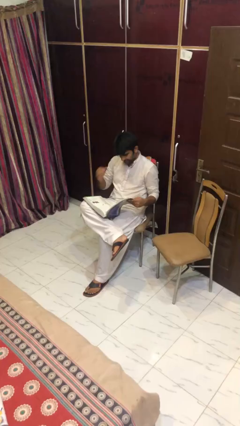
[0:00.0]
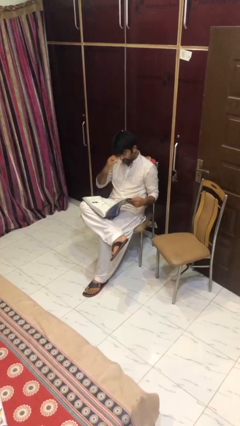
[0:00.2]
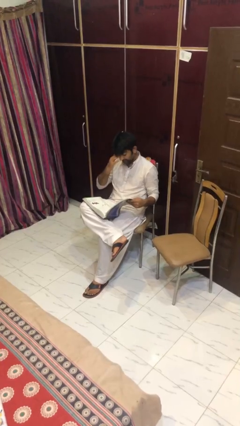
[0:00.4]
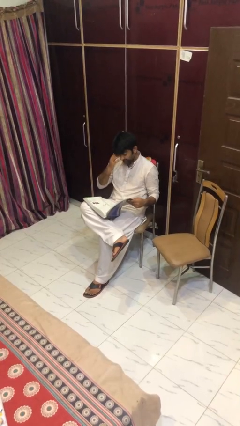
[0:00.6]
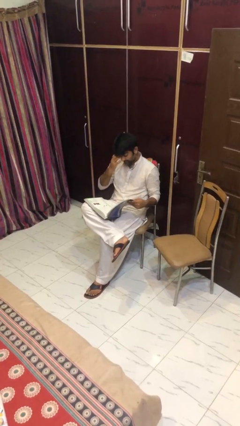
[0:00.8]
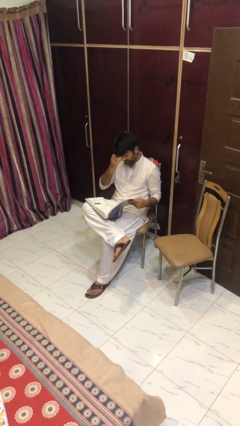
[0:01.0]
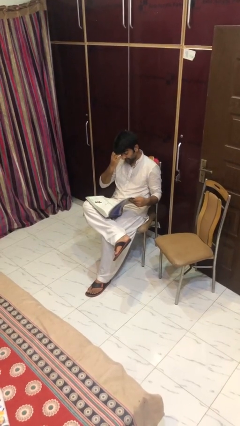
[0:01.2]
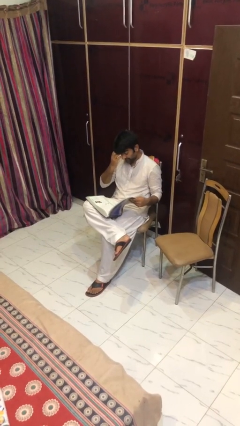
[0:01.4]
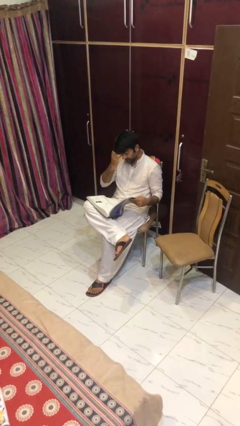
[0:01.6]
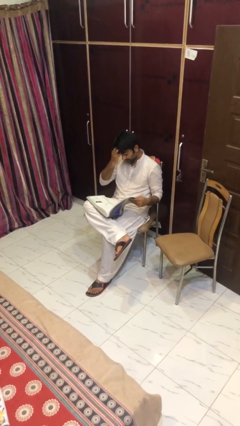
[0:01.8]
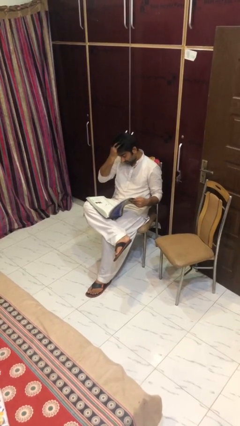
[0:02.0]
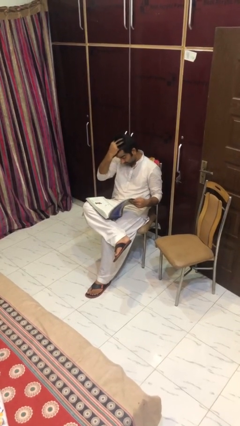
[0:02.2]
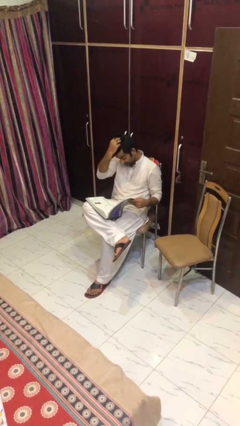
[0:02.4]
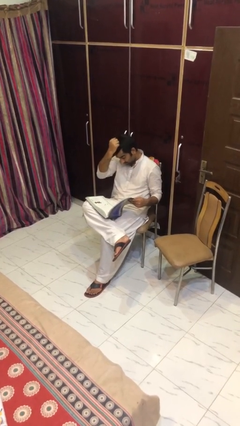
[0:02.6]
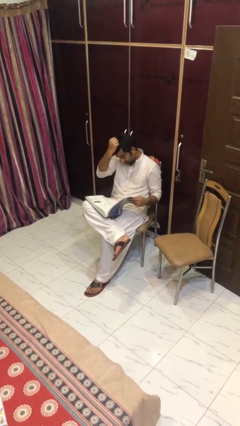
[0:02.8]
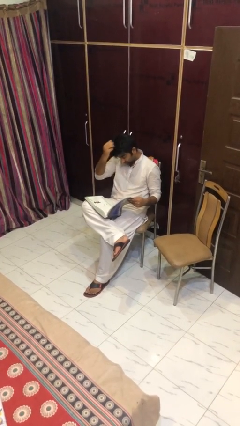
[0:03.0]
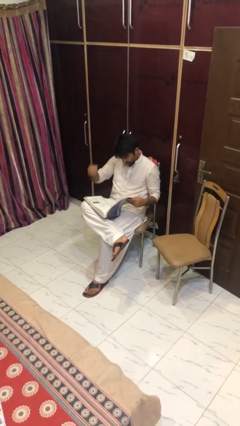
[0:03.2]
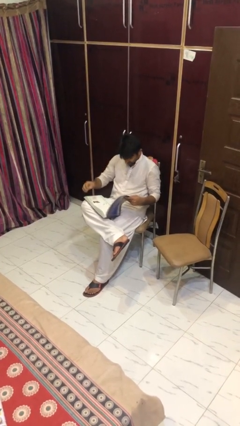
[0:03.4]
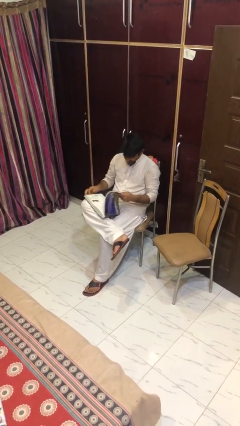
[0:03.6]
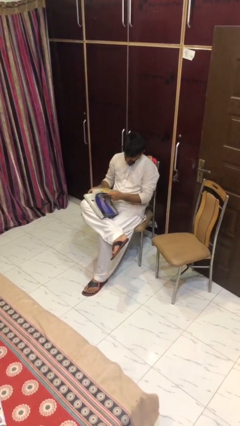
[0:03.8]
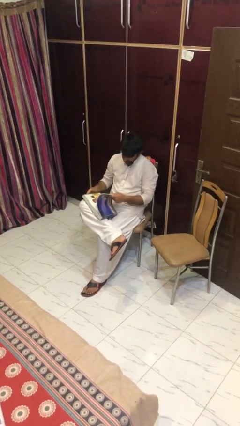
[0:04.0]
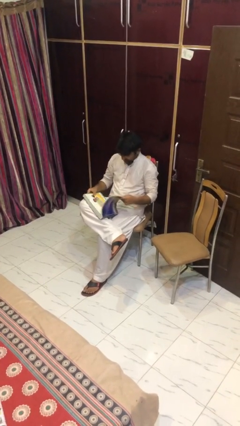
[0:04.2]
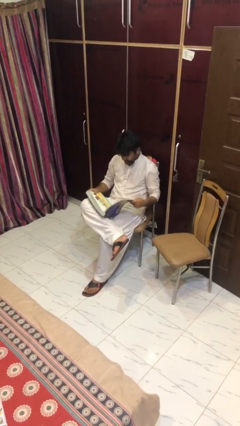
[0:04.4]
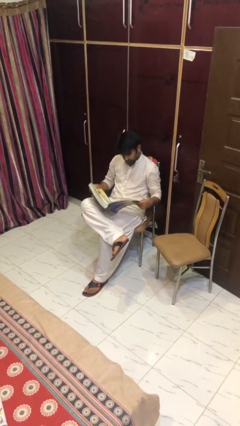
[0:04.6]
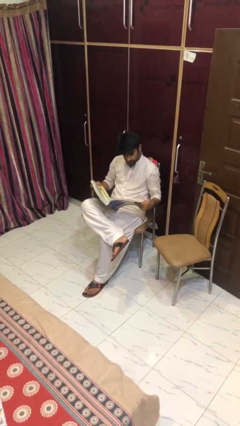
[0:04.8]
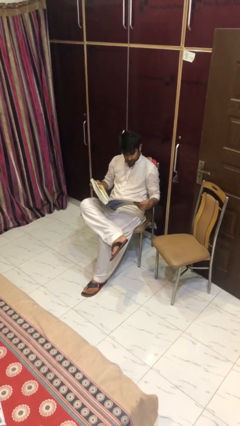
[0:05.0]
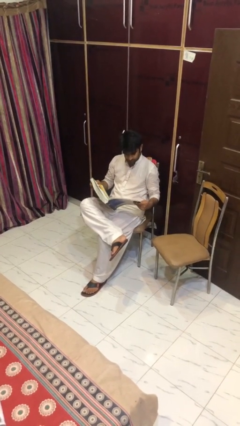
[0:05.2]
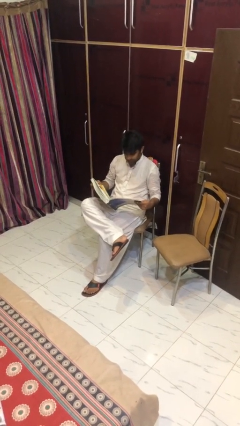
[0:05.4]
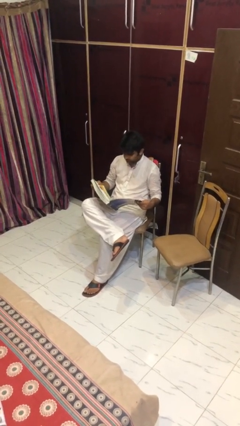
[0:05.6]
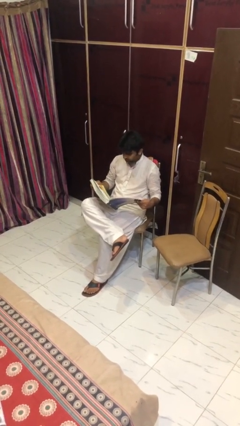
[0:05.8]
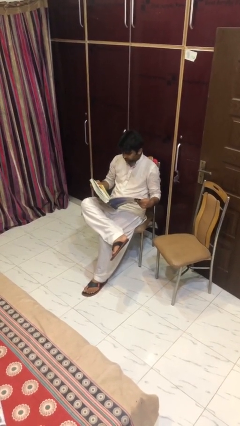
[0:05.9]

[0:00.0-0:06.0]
person reads document

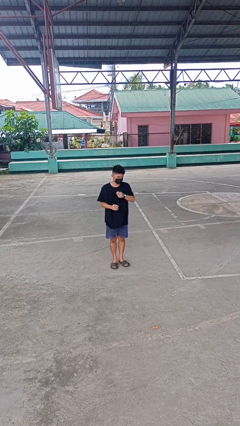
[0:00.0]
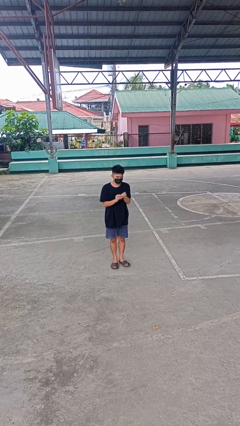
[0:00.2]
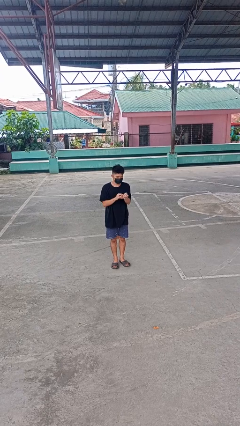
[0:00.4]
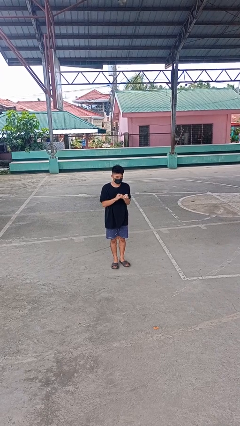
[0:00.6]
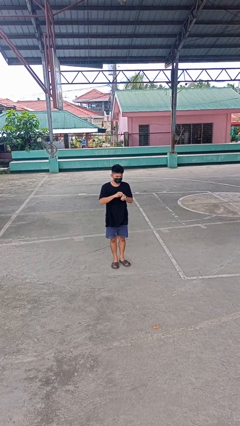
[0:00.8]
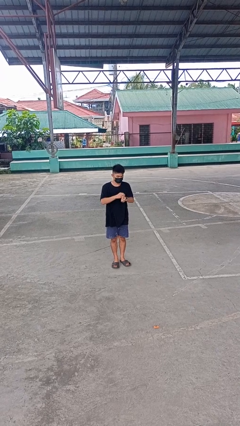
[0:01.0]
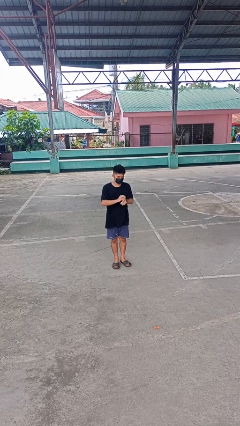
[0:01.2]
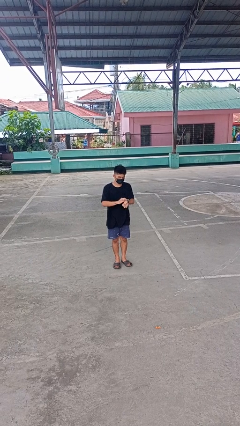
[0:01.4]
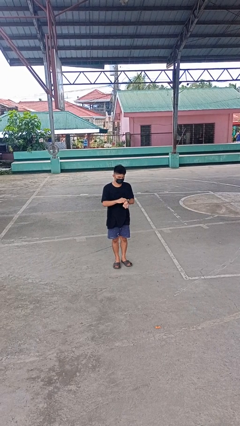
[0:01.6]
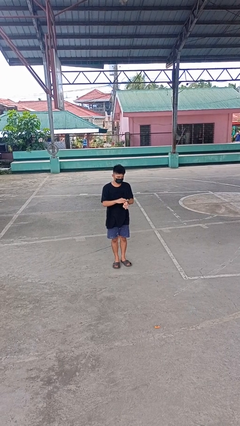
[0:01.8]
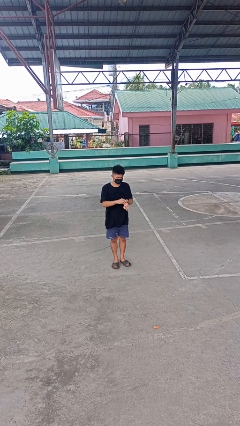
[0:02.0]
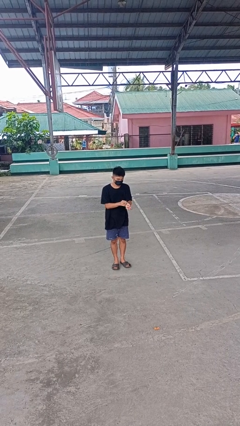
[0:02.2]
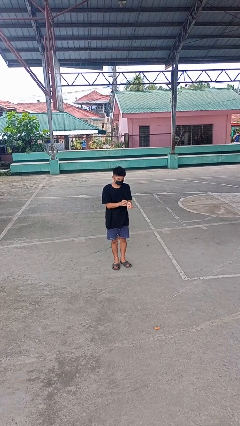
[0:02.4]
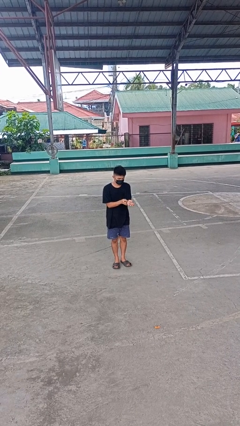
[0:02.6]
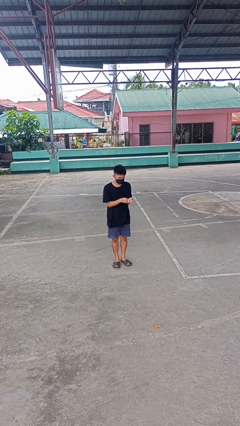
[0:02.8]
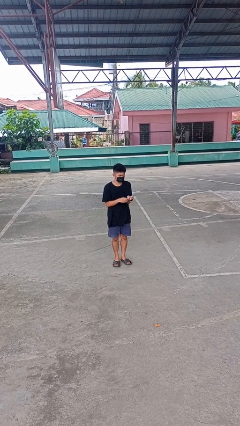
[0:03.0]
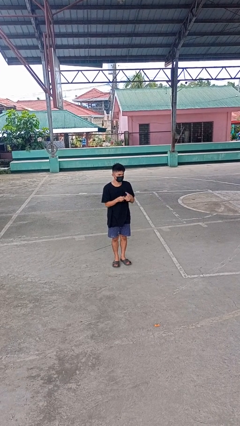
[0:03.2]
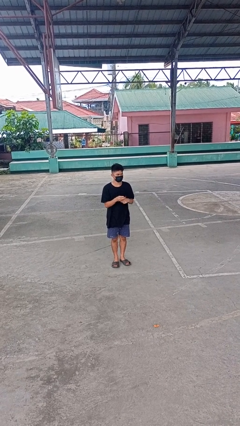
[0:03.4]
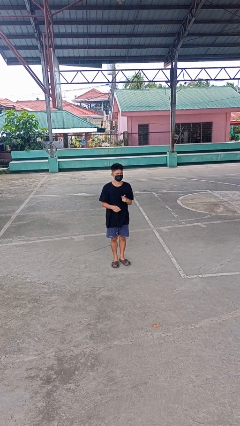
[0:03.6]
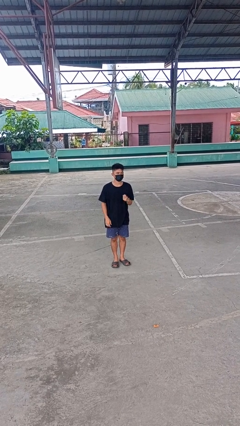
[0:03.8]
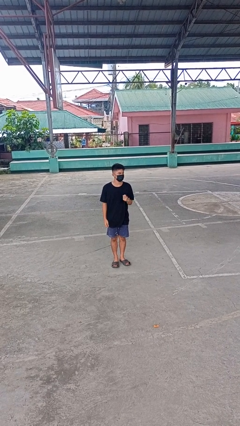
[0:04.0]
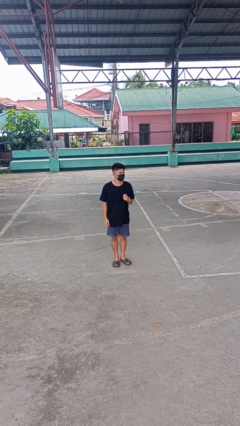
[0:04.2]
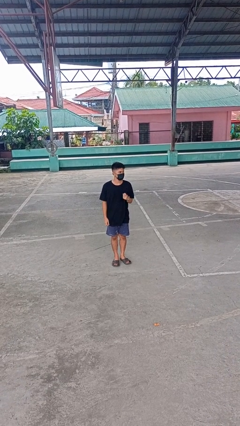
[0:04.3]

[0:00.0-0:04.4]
person takes off wristwatch

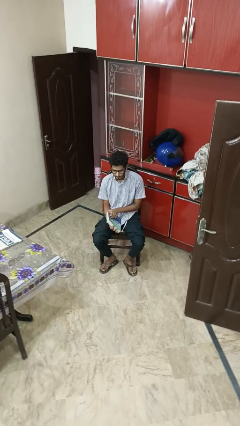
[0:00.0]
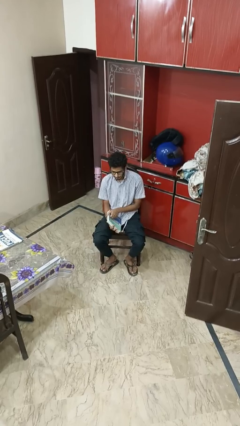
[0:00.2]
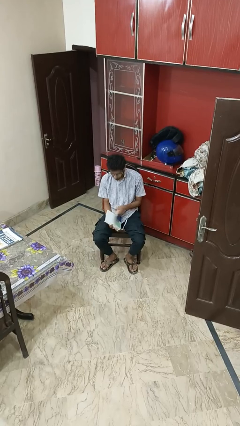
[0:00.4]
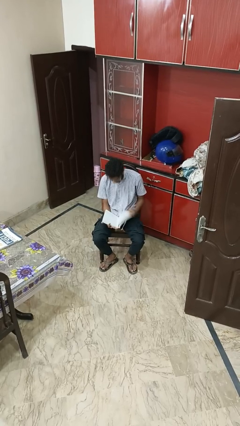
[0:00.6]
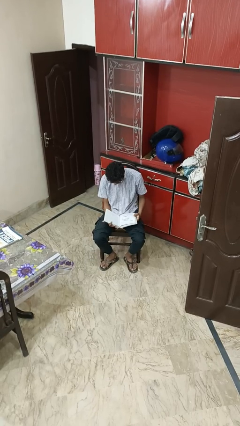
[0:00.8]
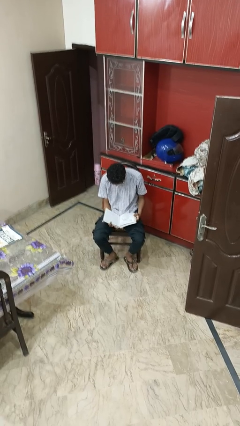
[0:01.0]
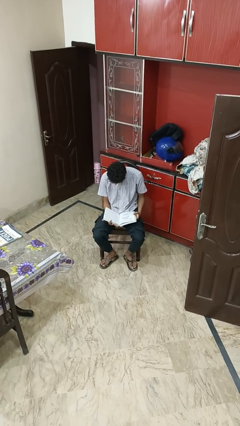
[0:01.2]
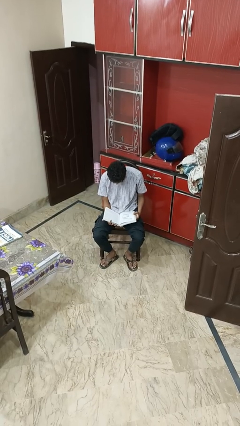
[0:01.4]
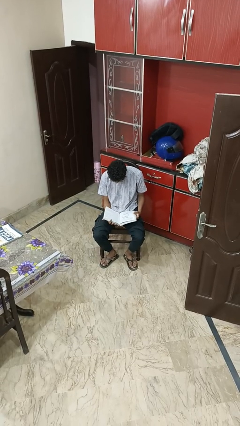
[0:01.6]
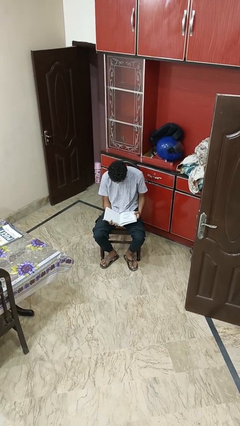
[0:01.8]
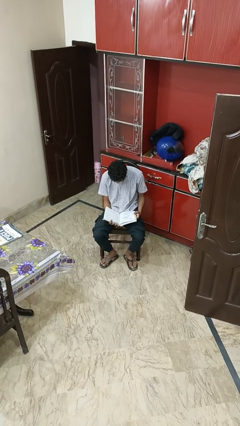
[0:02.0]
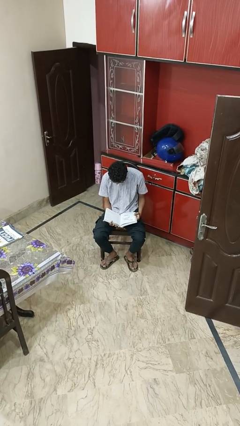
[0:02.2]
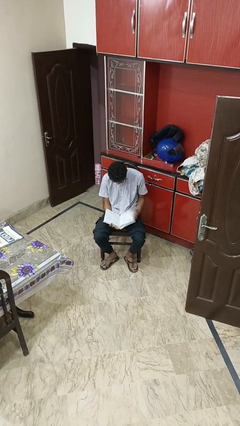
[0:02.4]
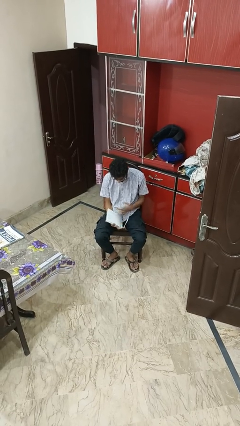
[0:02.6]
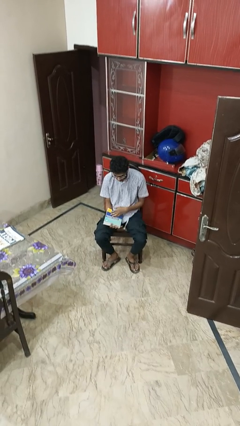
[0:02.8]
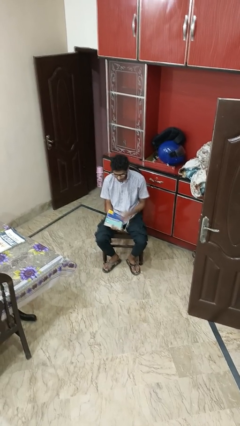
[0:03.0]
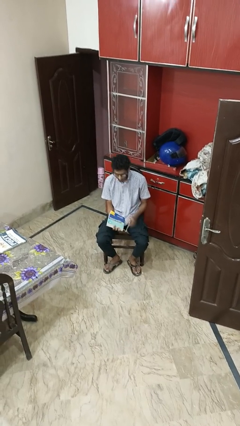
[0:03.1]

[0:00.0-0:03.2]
person reads book

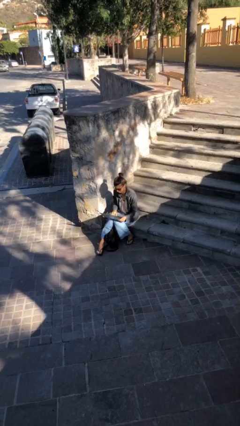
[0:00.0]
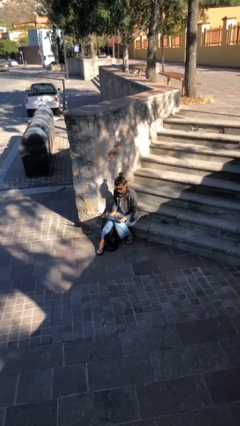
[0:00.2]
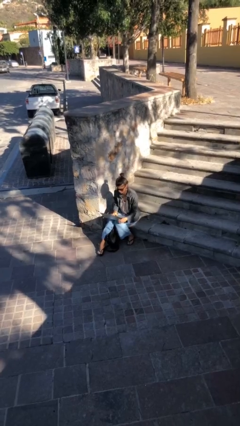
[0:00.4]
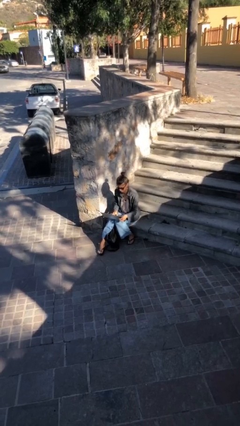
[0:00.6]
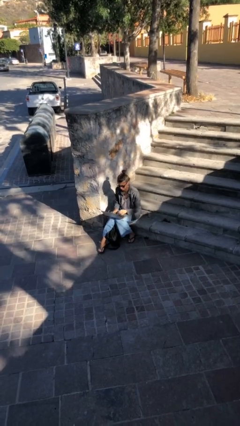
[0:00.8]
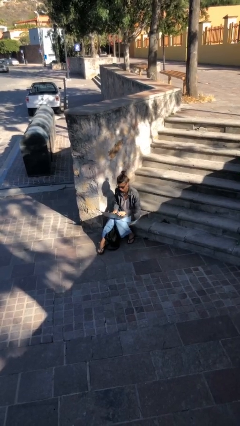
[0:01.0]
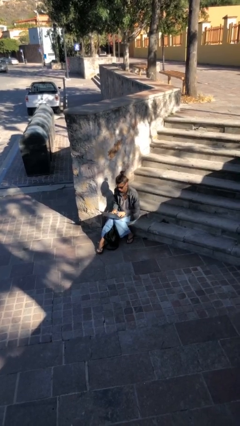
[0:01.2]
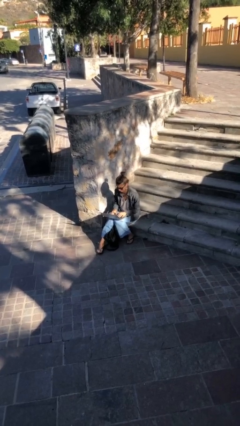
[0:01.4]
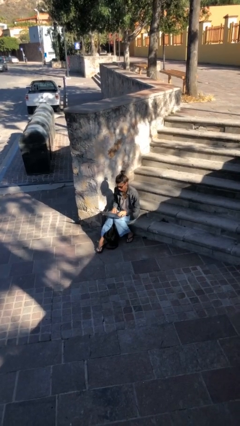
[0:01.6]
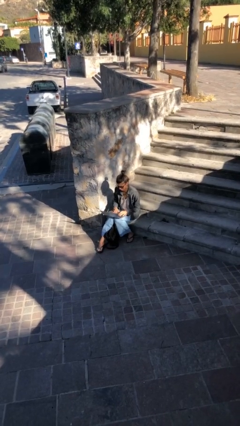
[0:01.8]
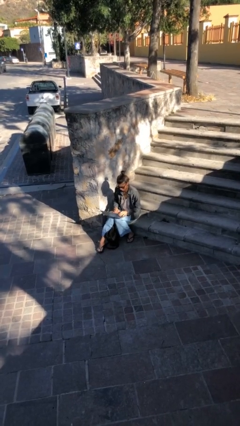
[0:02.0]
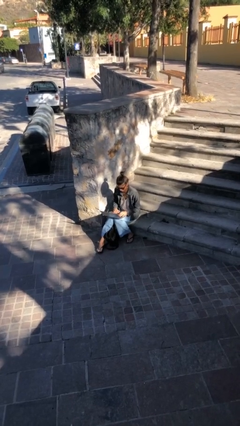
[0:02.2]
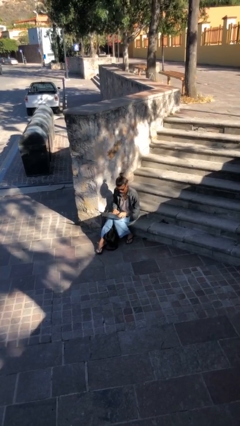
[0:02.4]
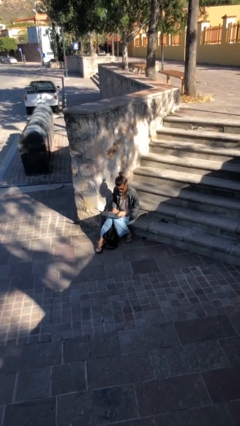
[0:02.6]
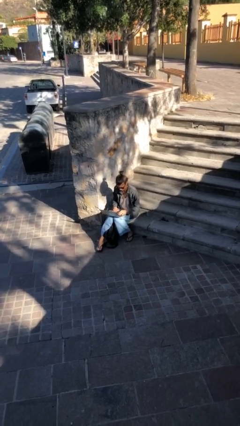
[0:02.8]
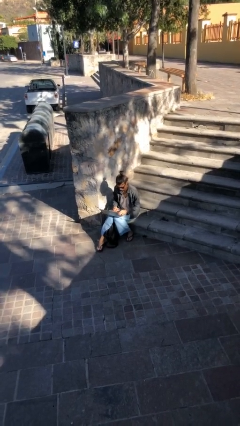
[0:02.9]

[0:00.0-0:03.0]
person interacts with laptop

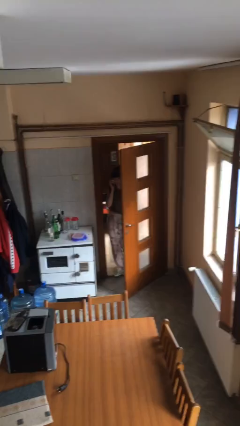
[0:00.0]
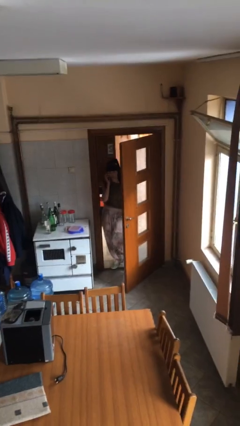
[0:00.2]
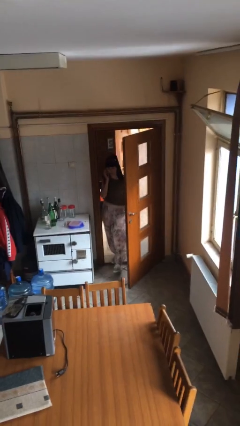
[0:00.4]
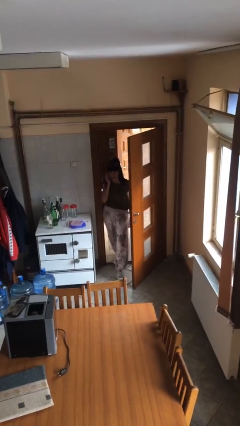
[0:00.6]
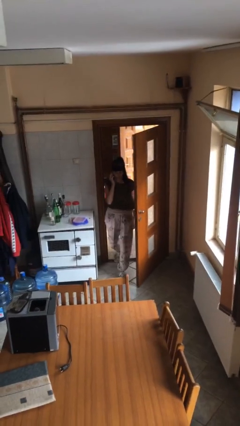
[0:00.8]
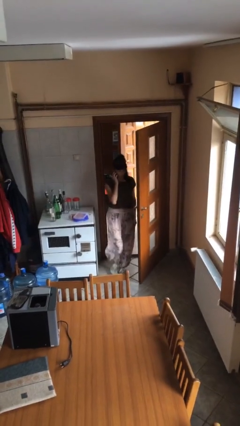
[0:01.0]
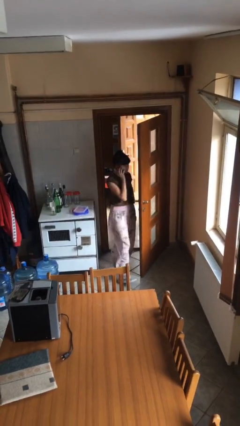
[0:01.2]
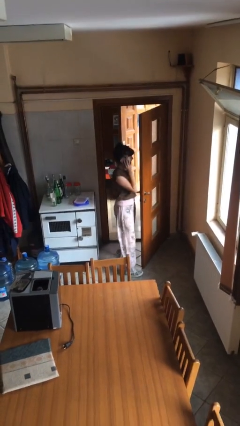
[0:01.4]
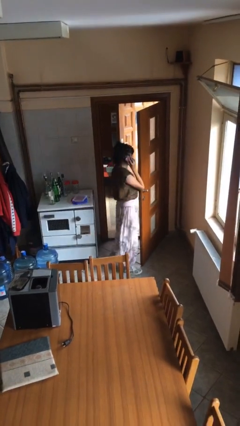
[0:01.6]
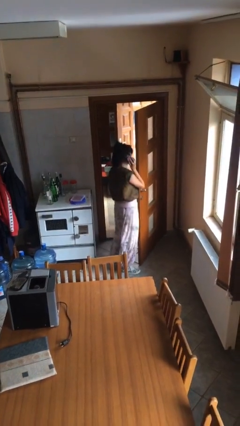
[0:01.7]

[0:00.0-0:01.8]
person enters scene through structure
